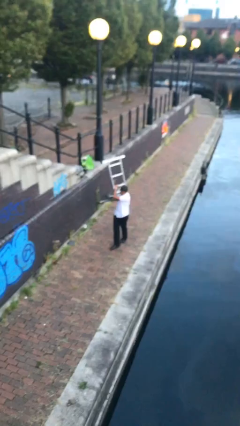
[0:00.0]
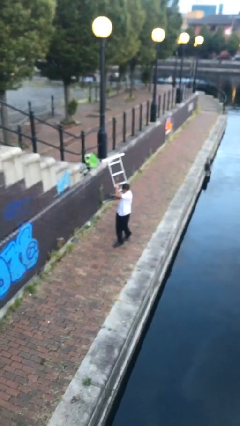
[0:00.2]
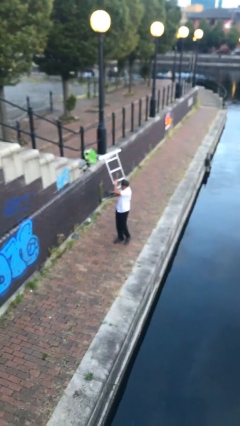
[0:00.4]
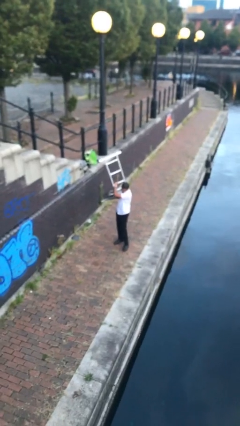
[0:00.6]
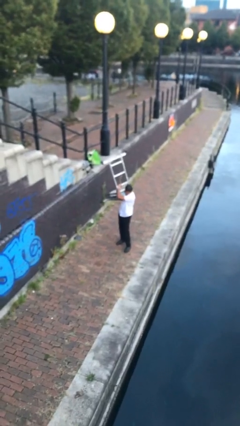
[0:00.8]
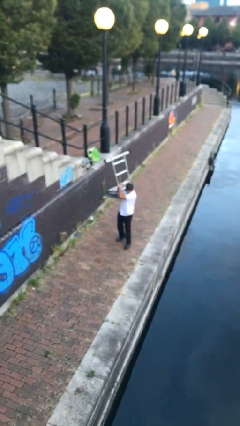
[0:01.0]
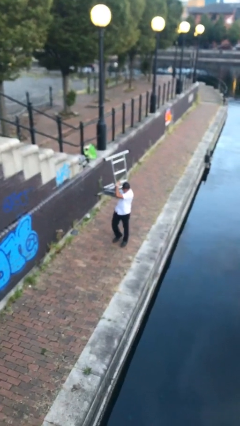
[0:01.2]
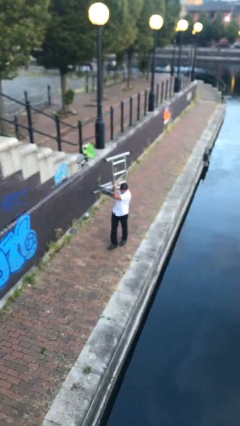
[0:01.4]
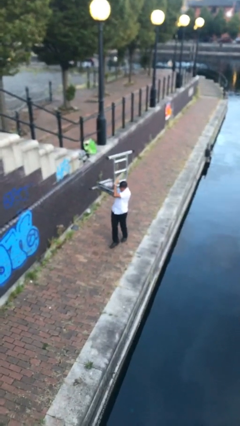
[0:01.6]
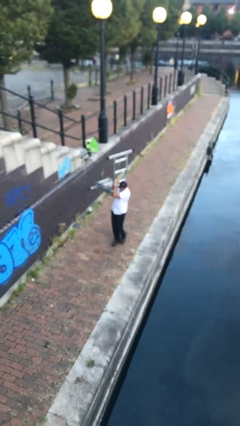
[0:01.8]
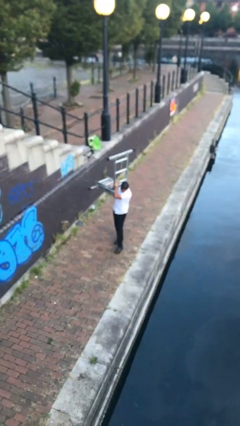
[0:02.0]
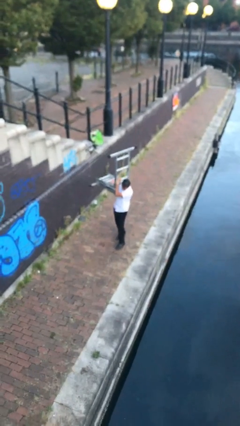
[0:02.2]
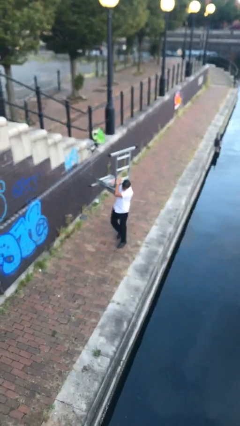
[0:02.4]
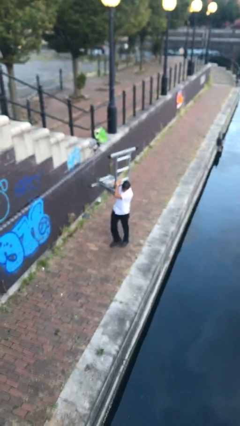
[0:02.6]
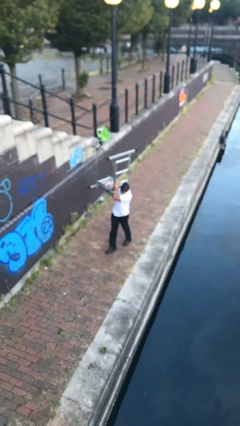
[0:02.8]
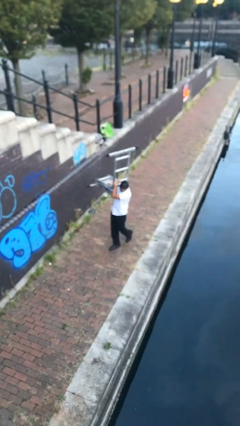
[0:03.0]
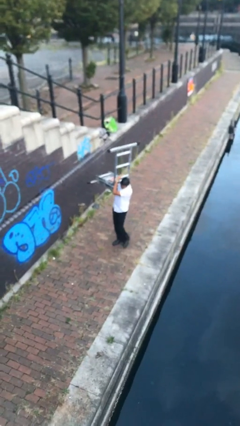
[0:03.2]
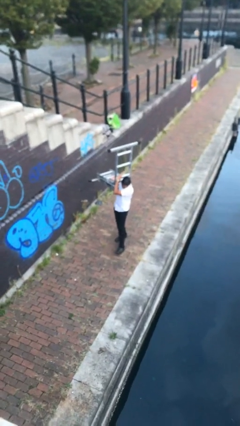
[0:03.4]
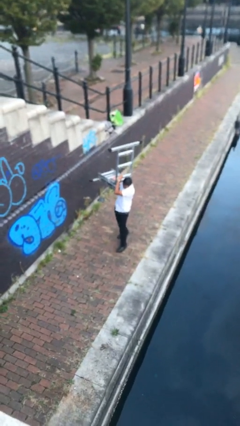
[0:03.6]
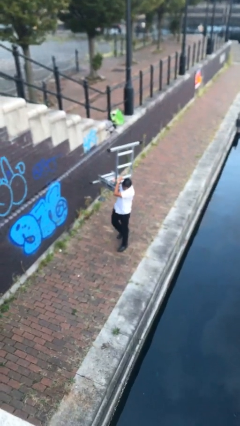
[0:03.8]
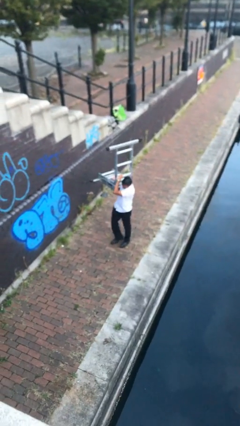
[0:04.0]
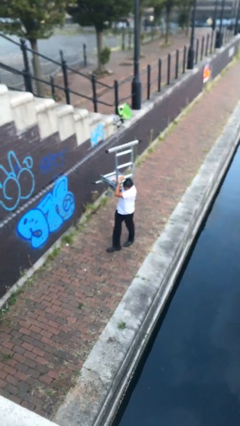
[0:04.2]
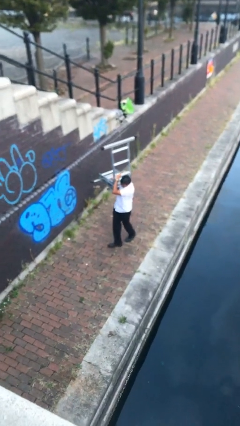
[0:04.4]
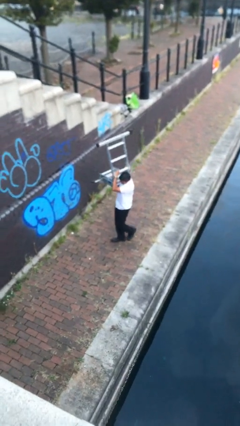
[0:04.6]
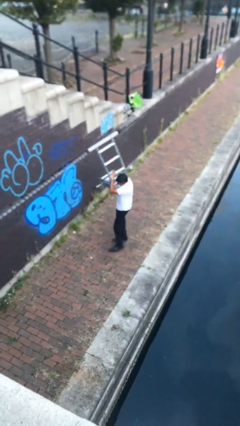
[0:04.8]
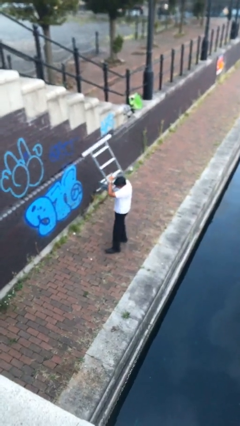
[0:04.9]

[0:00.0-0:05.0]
person carries heavy object

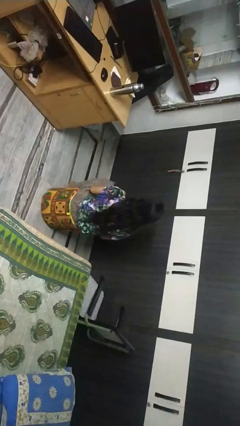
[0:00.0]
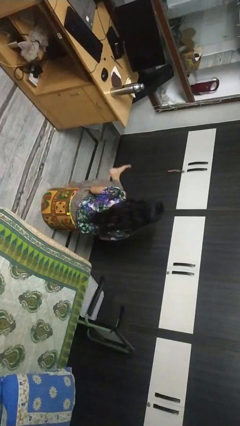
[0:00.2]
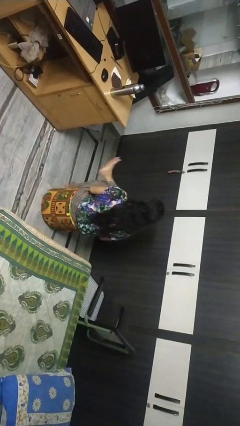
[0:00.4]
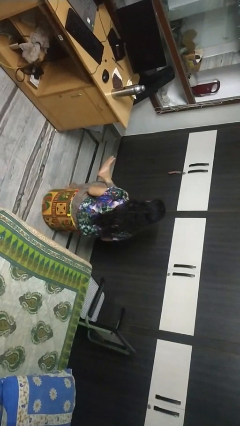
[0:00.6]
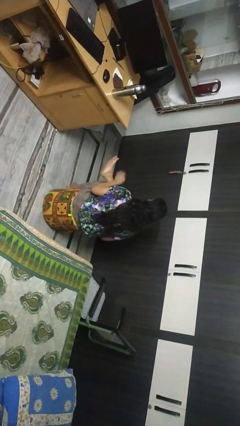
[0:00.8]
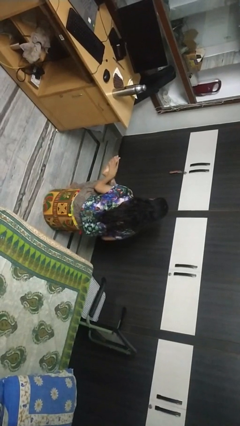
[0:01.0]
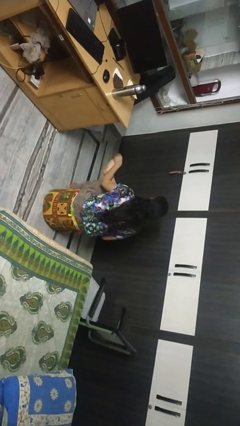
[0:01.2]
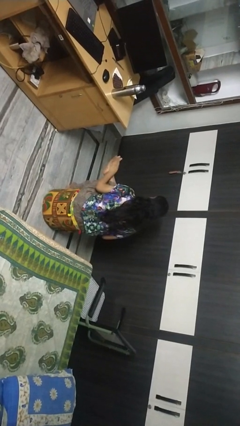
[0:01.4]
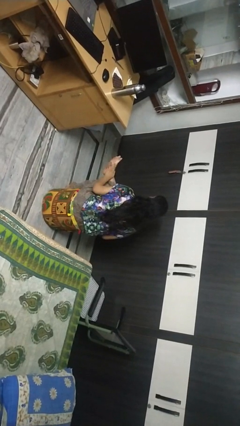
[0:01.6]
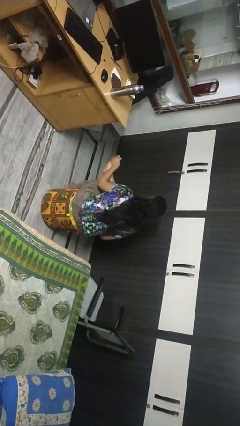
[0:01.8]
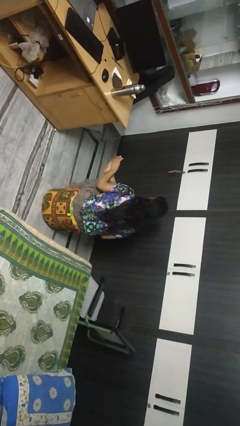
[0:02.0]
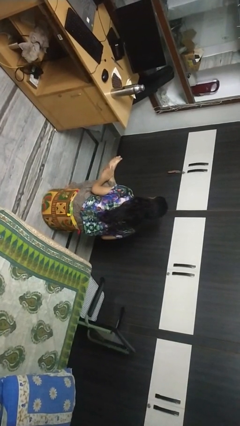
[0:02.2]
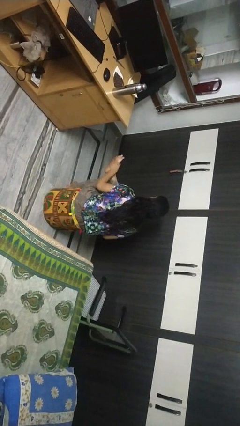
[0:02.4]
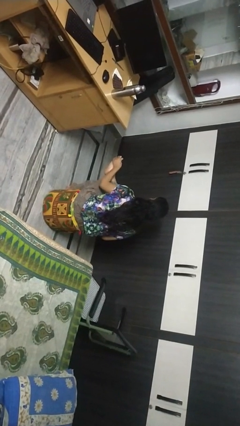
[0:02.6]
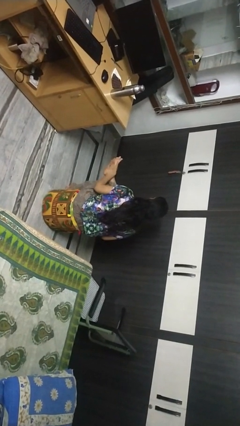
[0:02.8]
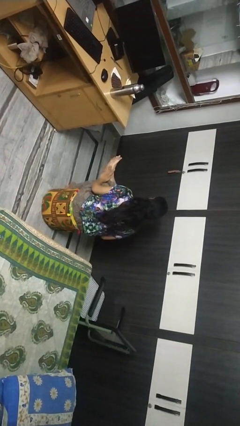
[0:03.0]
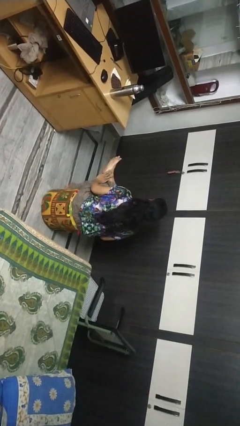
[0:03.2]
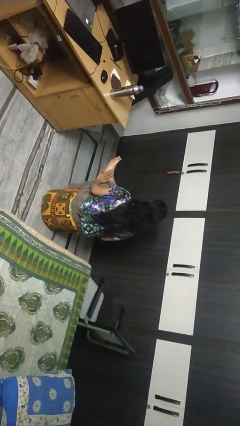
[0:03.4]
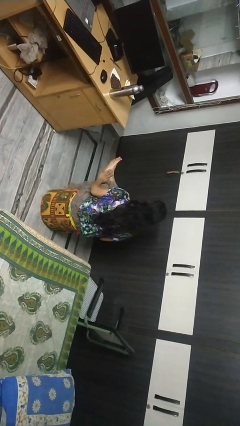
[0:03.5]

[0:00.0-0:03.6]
person rubs foot

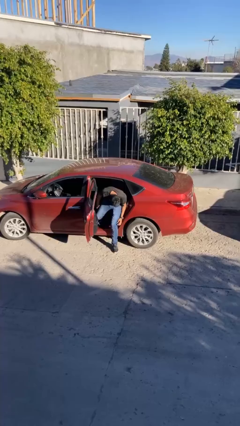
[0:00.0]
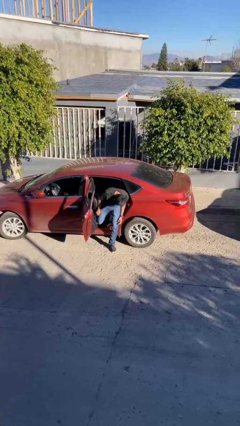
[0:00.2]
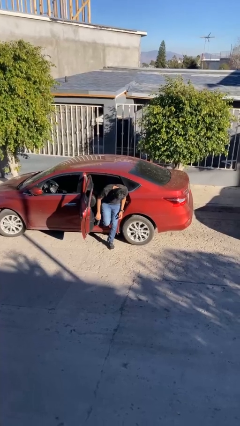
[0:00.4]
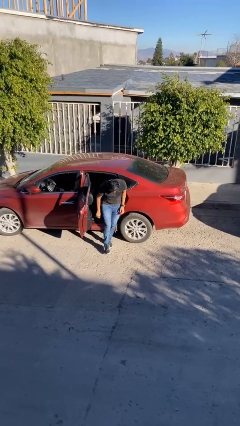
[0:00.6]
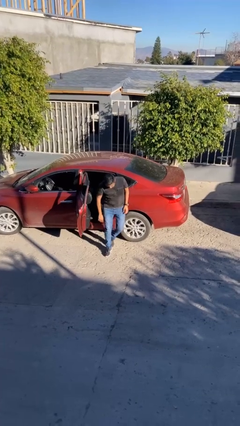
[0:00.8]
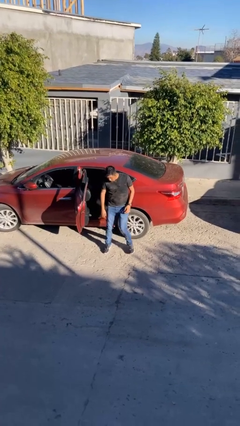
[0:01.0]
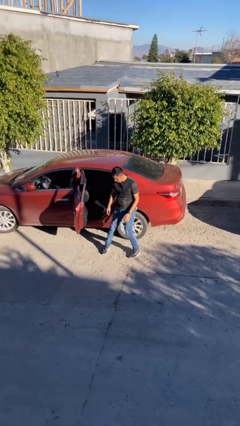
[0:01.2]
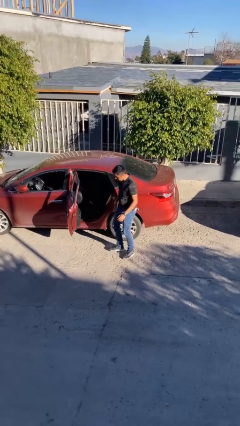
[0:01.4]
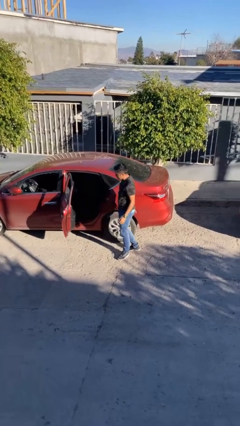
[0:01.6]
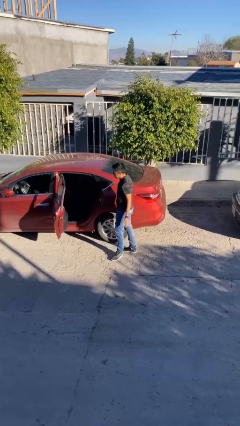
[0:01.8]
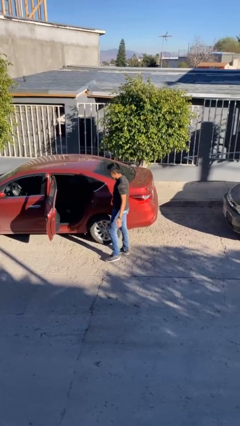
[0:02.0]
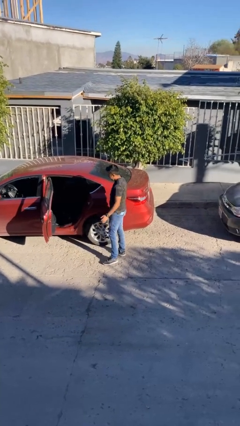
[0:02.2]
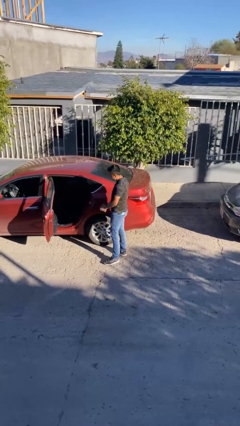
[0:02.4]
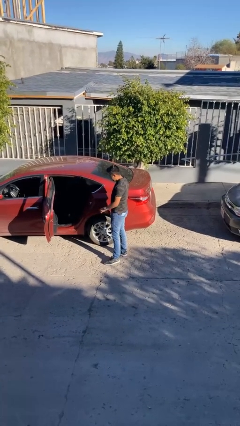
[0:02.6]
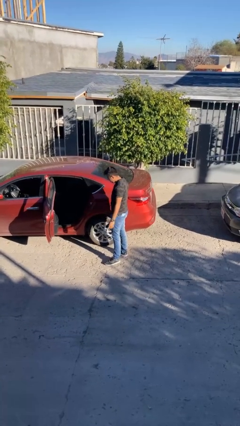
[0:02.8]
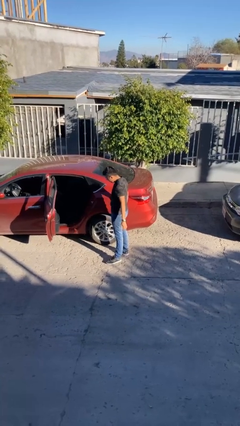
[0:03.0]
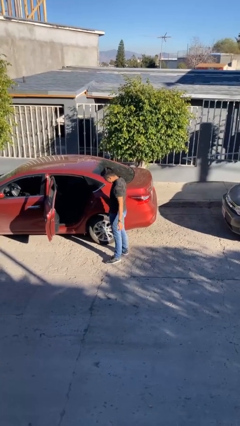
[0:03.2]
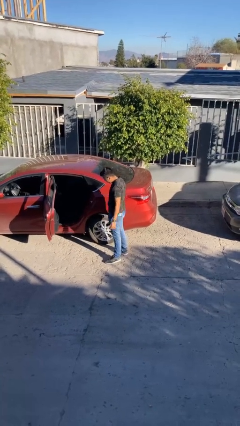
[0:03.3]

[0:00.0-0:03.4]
person exits car

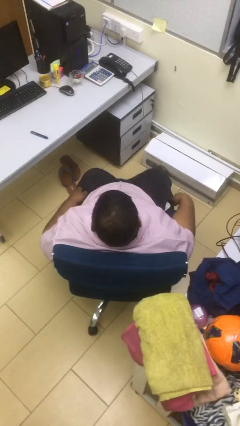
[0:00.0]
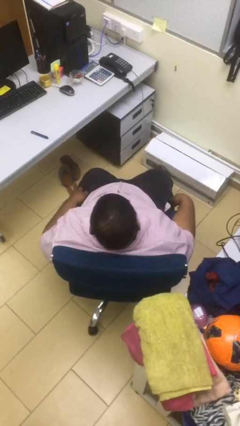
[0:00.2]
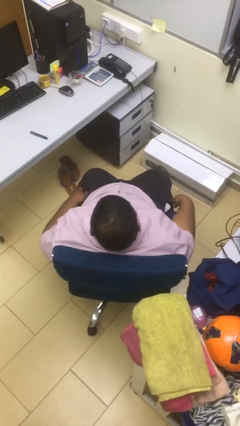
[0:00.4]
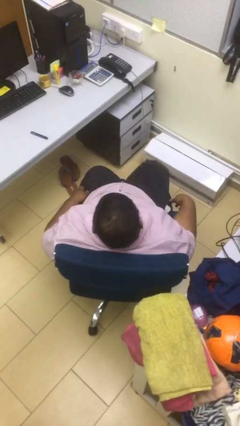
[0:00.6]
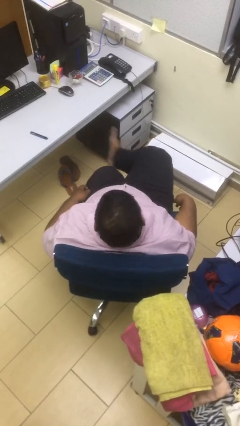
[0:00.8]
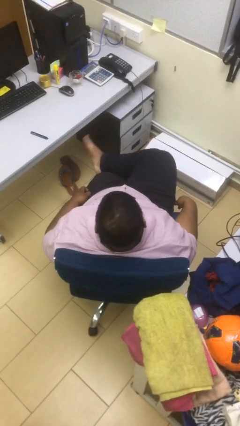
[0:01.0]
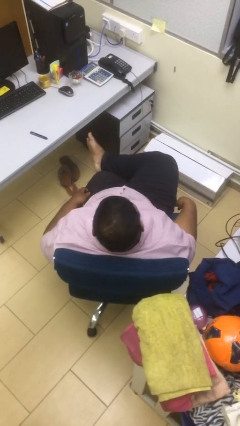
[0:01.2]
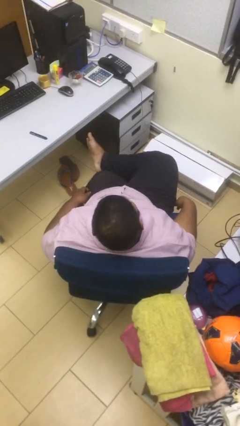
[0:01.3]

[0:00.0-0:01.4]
person crosses legs

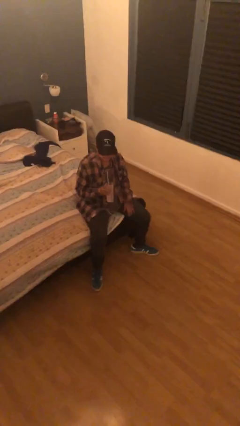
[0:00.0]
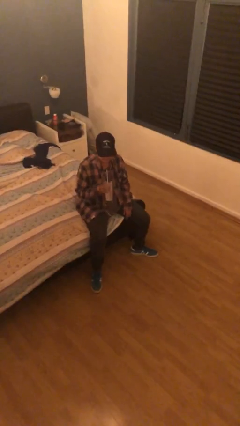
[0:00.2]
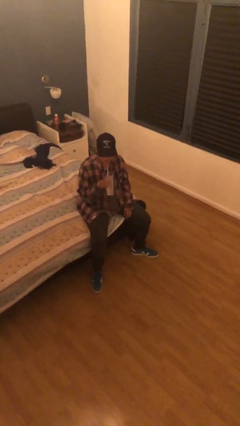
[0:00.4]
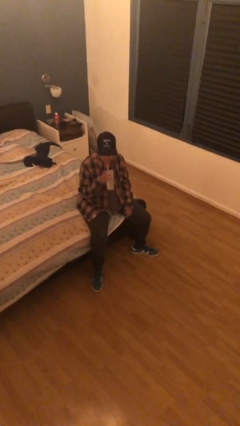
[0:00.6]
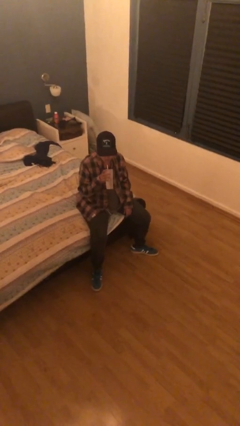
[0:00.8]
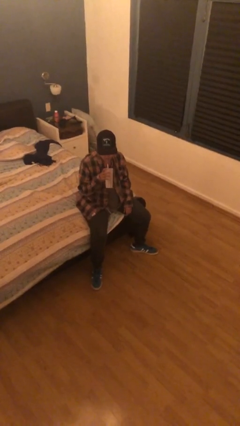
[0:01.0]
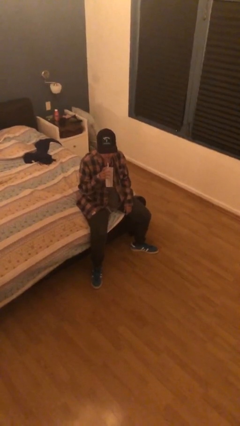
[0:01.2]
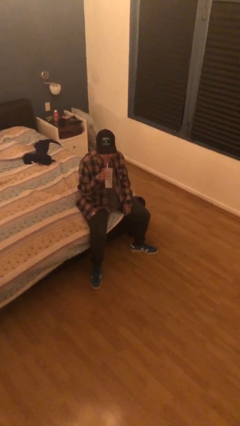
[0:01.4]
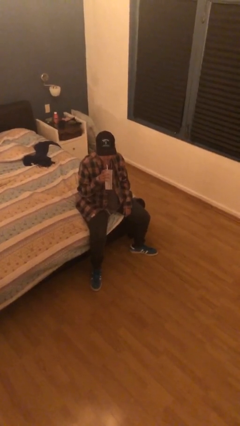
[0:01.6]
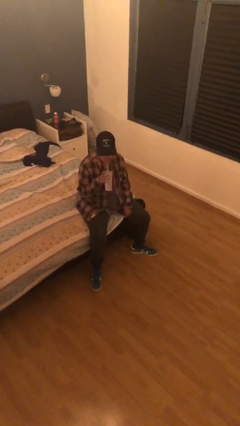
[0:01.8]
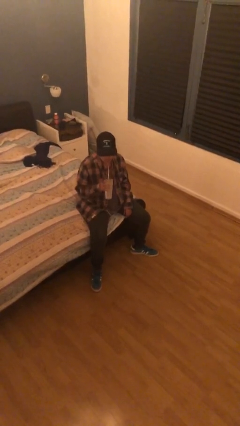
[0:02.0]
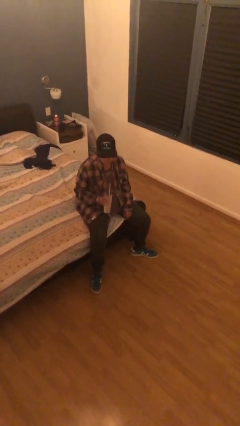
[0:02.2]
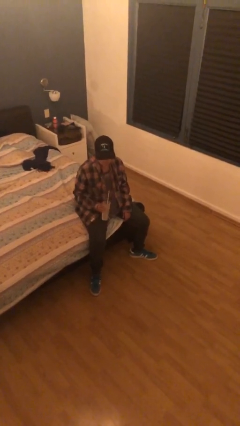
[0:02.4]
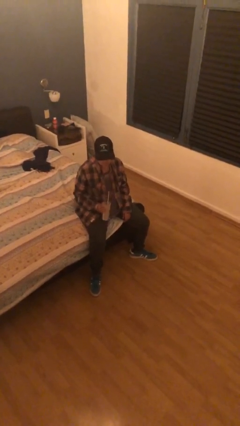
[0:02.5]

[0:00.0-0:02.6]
person drinks from straw

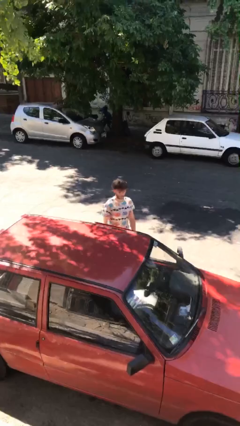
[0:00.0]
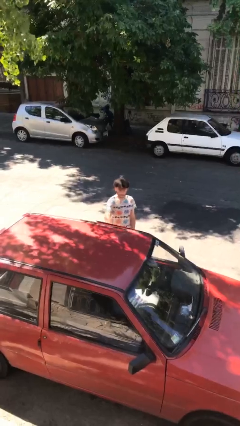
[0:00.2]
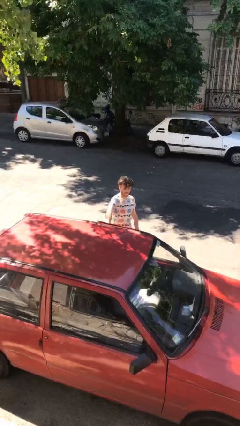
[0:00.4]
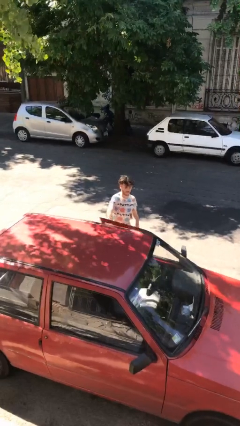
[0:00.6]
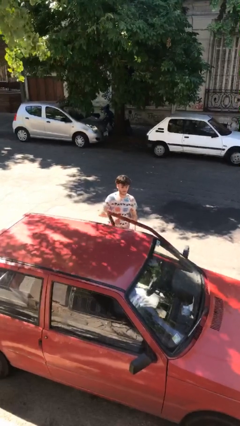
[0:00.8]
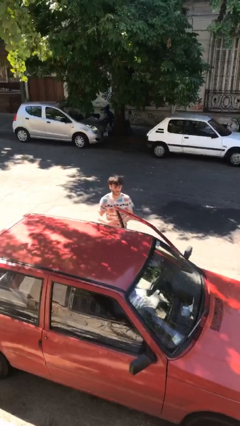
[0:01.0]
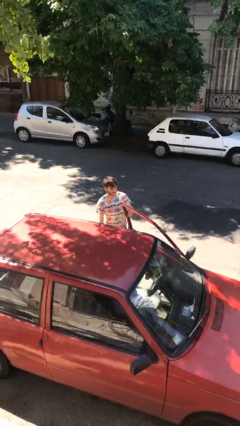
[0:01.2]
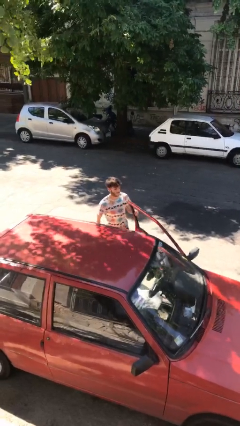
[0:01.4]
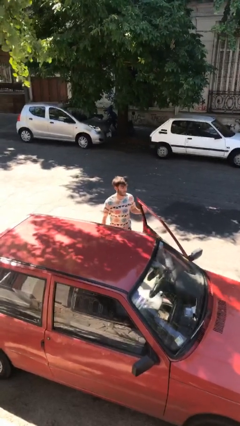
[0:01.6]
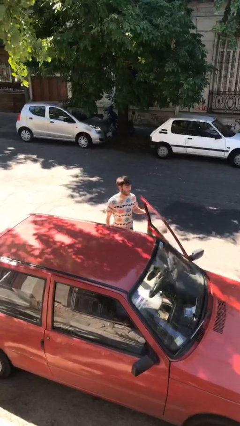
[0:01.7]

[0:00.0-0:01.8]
person opens car door
